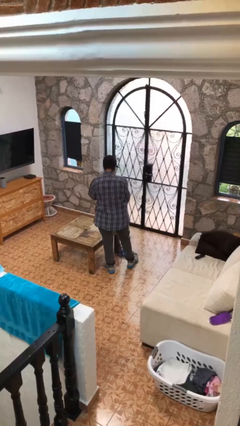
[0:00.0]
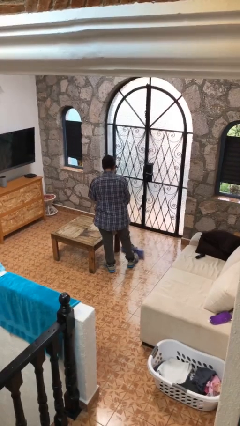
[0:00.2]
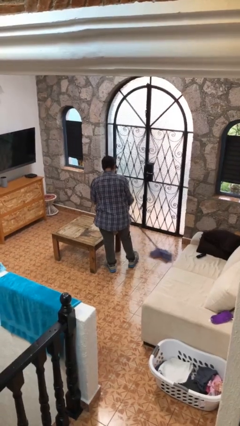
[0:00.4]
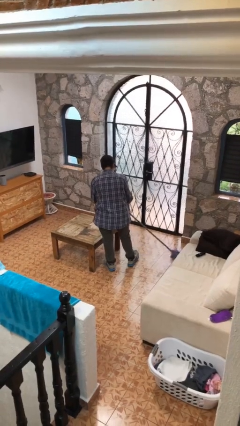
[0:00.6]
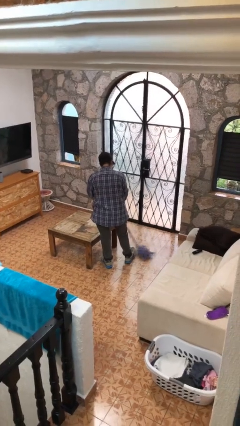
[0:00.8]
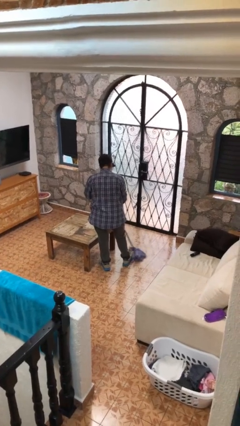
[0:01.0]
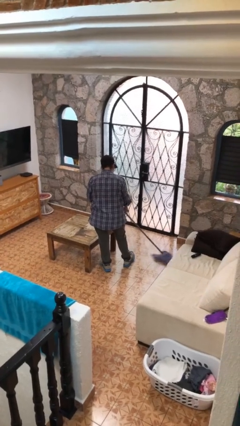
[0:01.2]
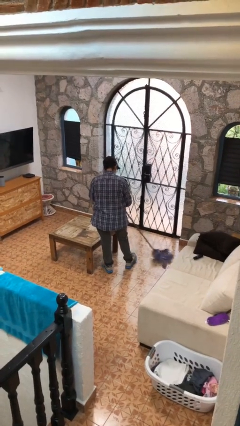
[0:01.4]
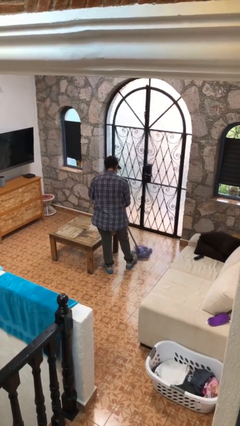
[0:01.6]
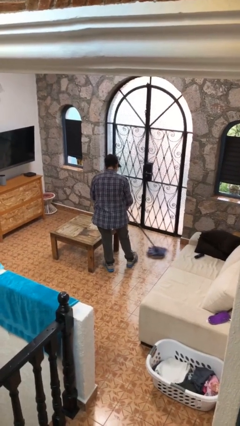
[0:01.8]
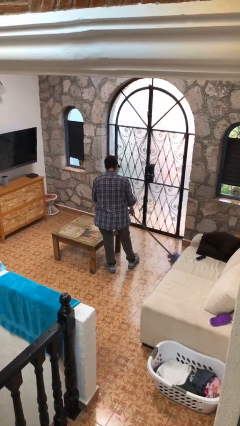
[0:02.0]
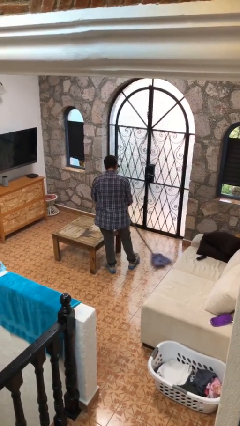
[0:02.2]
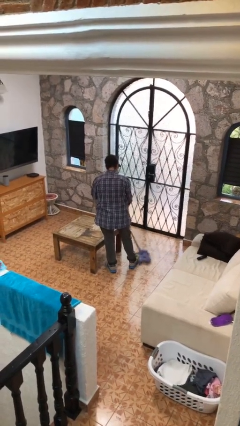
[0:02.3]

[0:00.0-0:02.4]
person mops

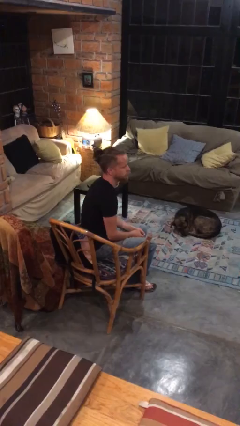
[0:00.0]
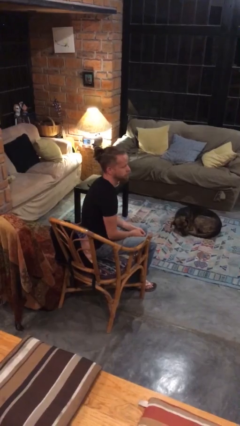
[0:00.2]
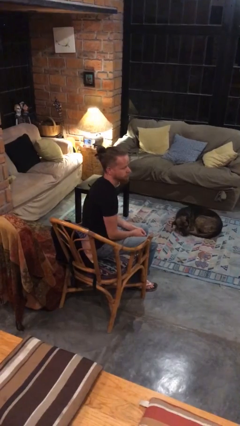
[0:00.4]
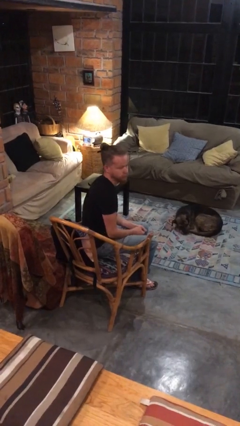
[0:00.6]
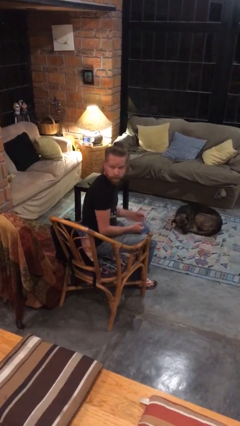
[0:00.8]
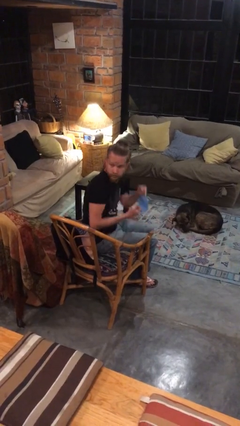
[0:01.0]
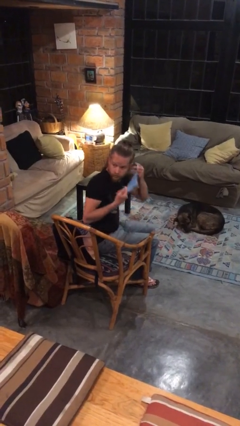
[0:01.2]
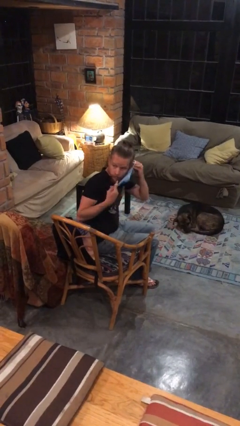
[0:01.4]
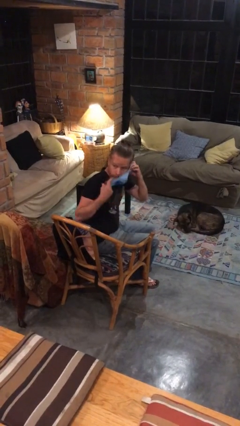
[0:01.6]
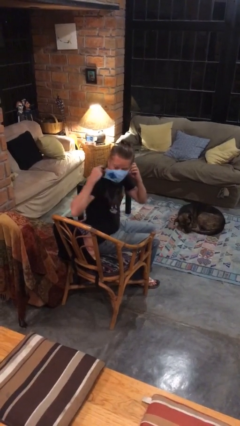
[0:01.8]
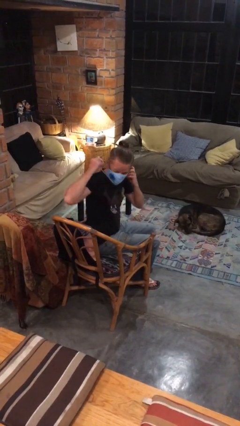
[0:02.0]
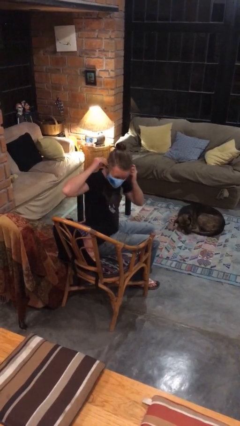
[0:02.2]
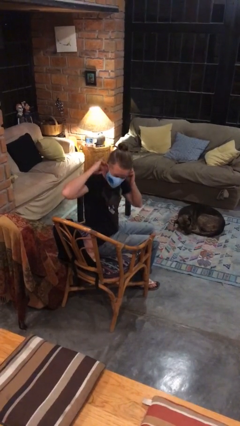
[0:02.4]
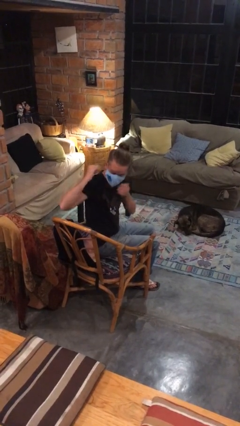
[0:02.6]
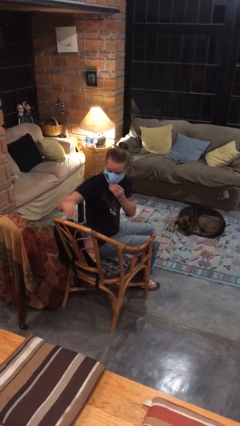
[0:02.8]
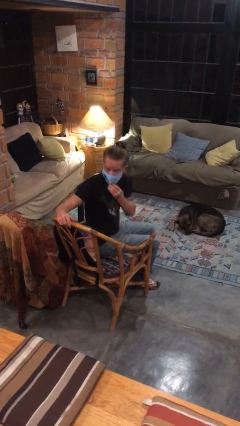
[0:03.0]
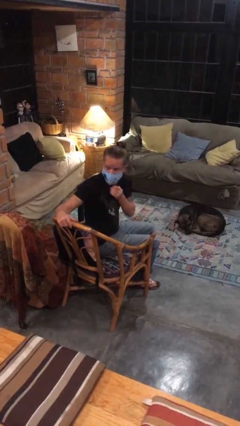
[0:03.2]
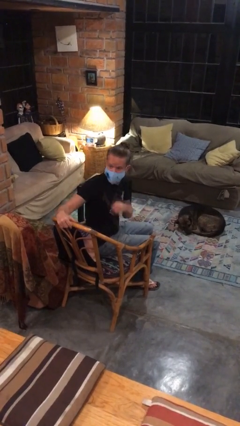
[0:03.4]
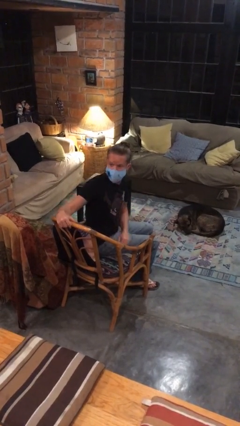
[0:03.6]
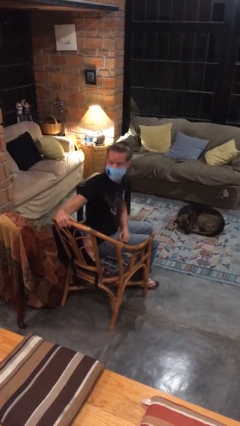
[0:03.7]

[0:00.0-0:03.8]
person puts on facemask

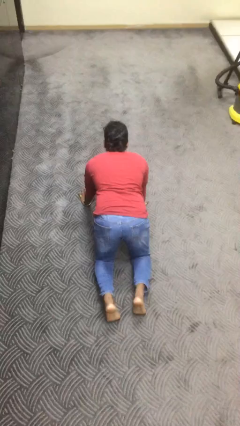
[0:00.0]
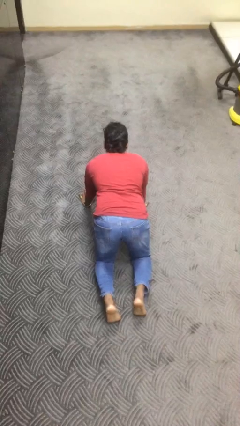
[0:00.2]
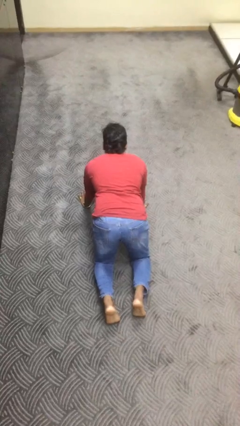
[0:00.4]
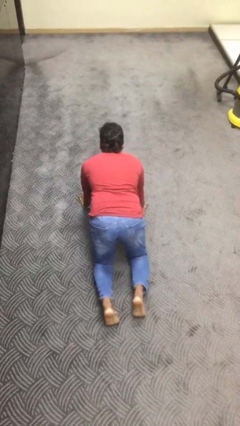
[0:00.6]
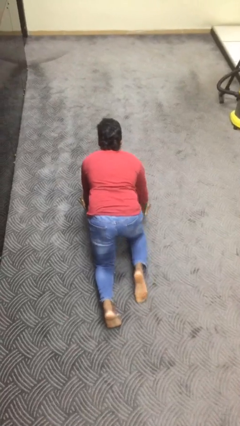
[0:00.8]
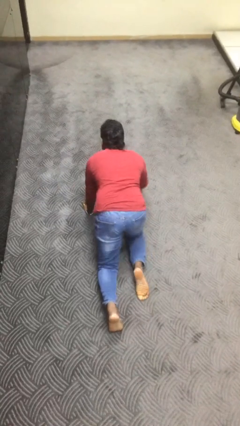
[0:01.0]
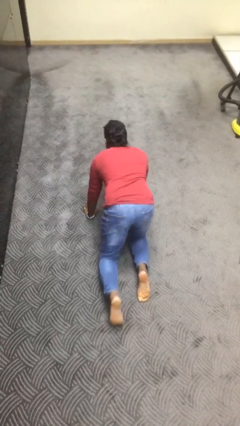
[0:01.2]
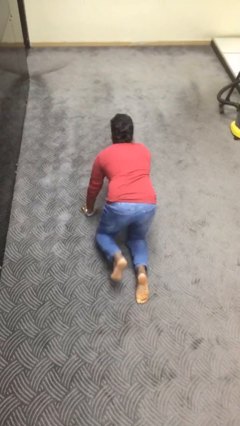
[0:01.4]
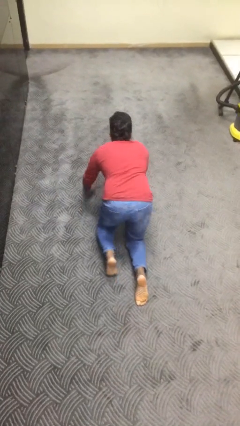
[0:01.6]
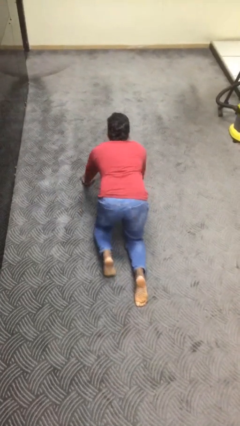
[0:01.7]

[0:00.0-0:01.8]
person crawls

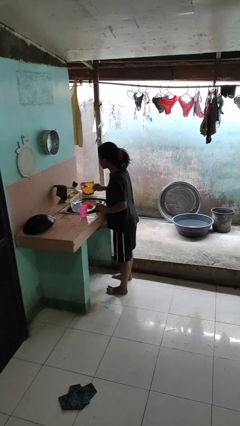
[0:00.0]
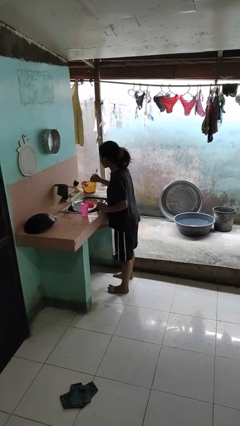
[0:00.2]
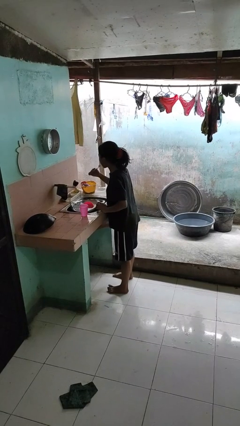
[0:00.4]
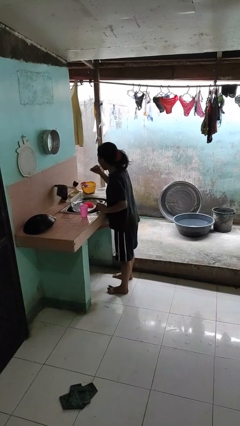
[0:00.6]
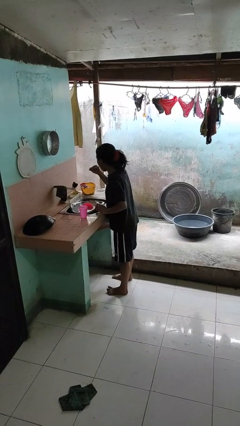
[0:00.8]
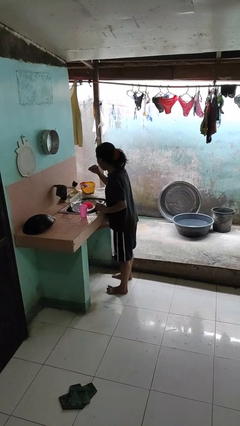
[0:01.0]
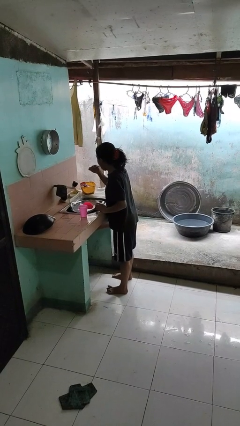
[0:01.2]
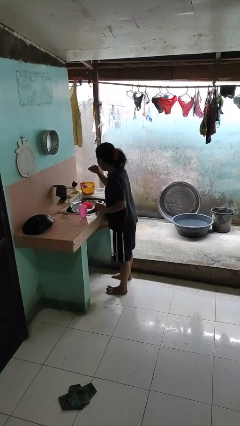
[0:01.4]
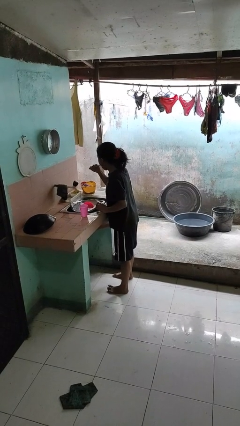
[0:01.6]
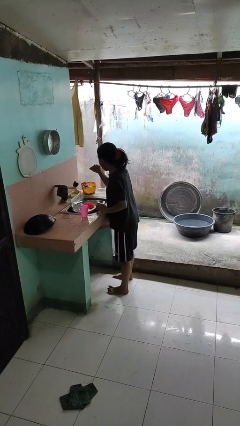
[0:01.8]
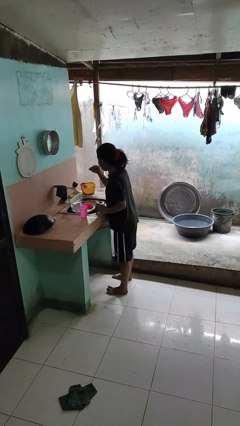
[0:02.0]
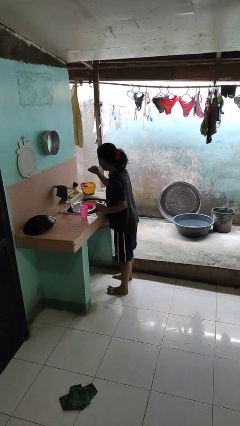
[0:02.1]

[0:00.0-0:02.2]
person brushes teeth

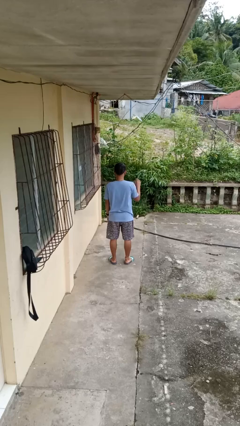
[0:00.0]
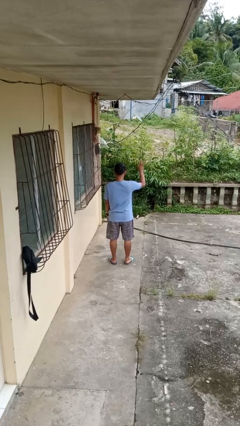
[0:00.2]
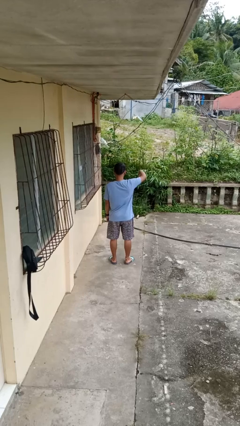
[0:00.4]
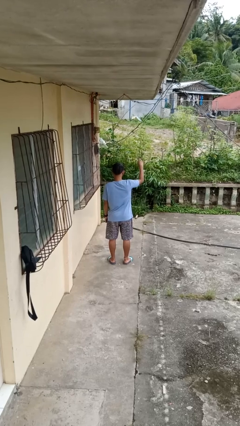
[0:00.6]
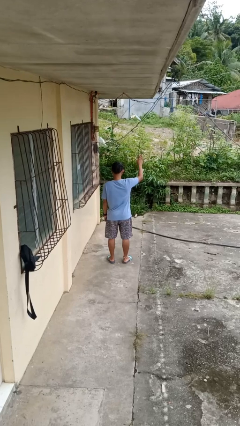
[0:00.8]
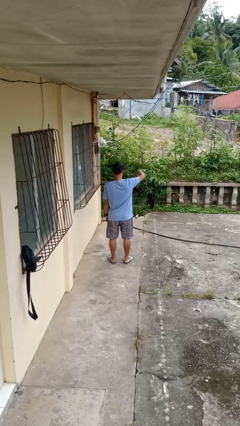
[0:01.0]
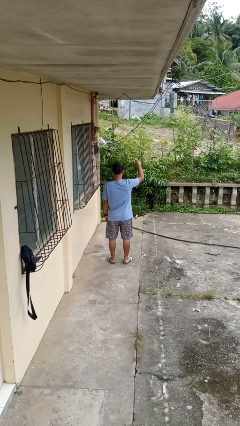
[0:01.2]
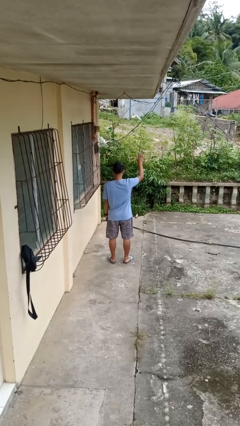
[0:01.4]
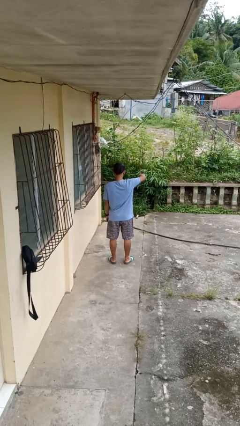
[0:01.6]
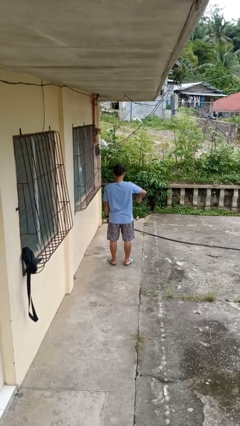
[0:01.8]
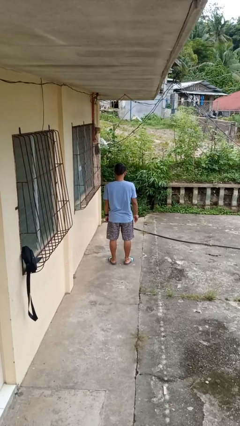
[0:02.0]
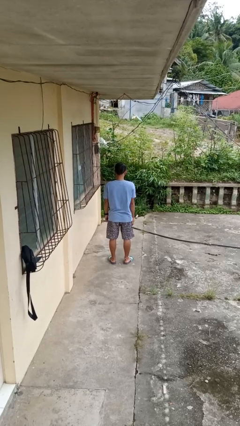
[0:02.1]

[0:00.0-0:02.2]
person gestures come here

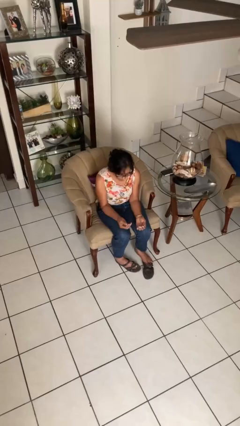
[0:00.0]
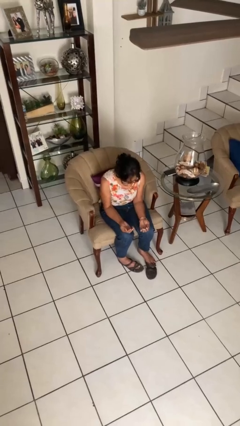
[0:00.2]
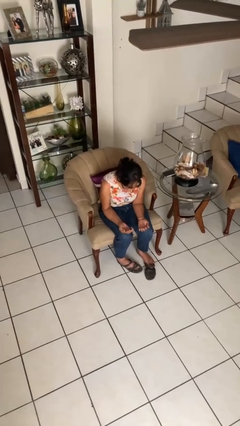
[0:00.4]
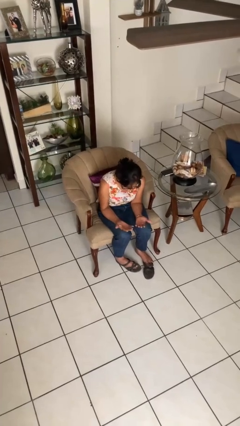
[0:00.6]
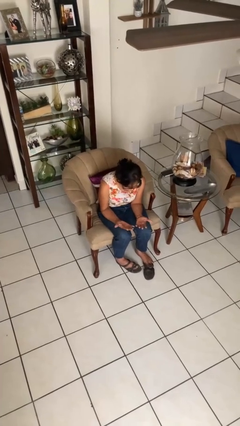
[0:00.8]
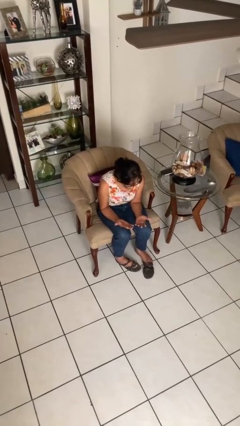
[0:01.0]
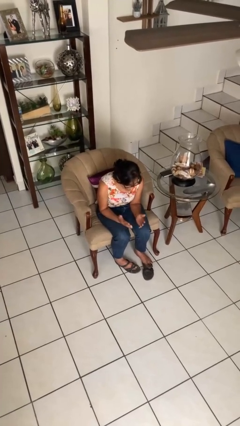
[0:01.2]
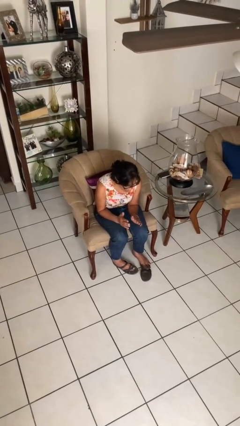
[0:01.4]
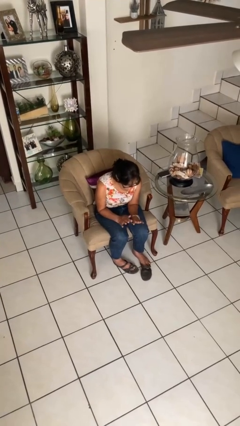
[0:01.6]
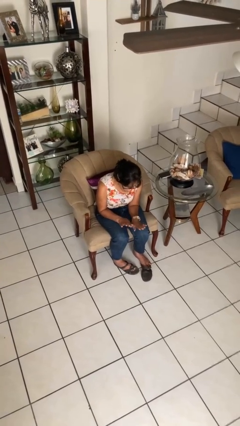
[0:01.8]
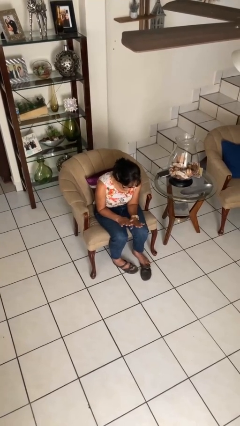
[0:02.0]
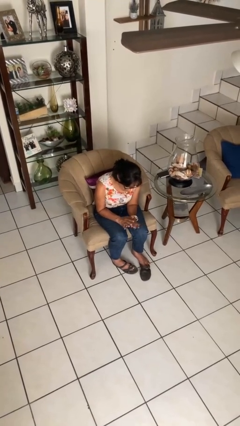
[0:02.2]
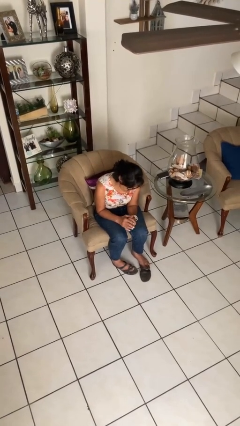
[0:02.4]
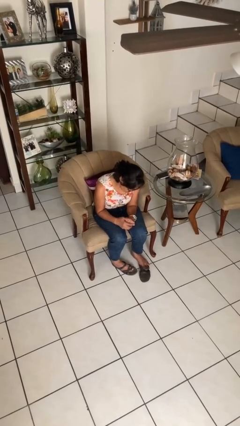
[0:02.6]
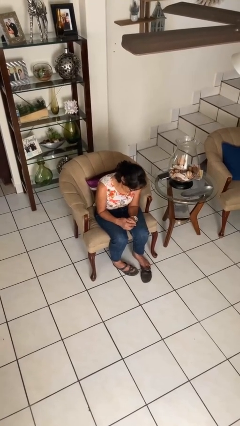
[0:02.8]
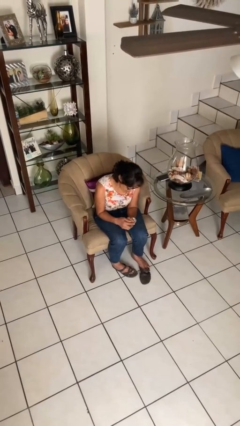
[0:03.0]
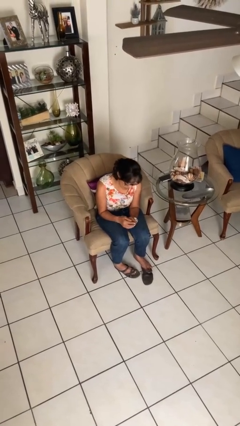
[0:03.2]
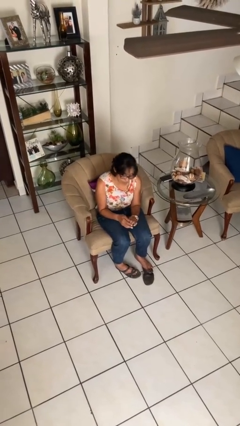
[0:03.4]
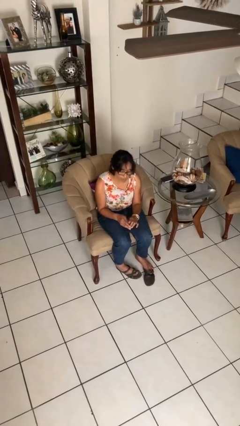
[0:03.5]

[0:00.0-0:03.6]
person looks at hands in lap

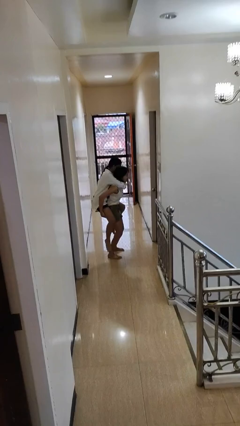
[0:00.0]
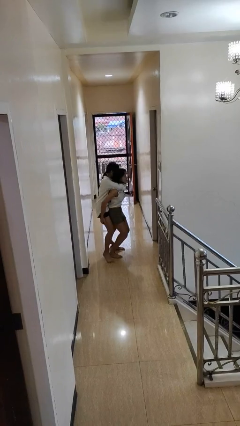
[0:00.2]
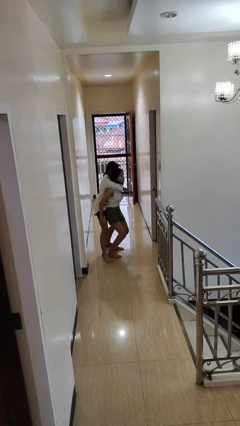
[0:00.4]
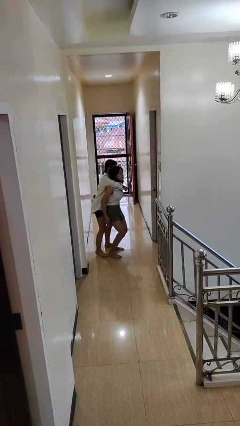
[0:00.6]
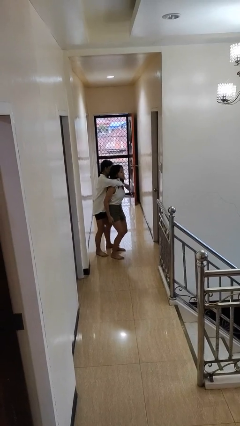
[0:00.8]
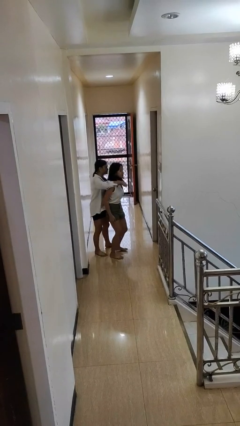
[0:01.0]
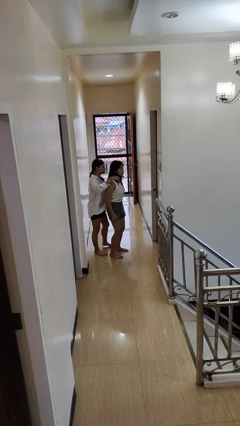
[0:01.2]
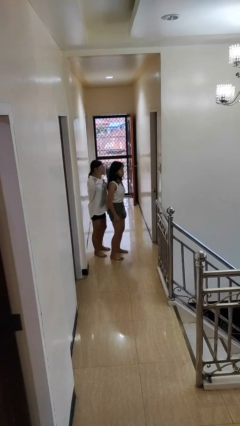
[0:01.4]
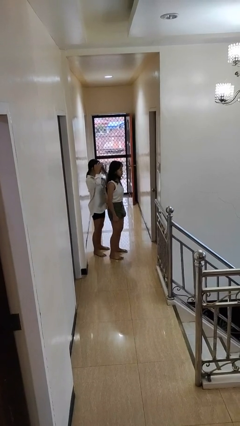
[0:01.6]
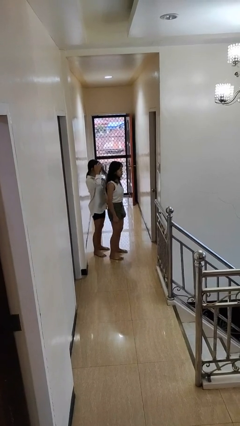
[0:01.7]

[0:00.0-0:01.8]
person puts down person
